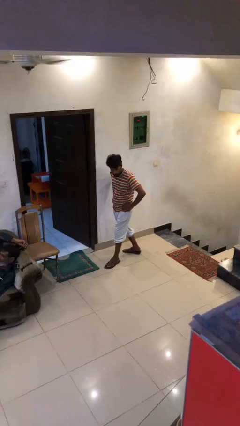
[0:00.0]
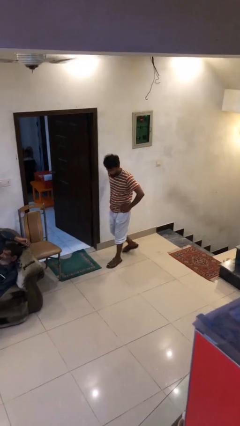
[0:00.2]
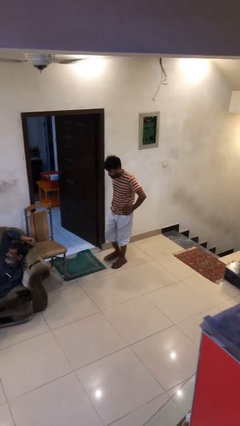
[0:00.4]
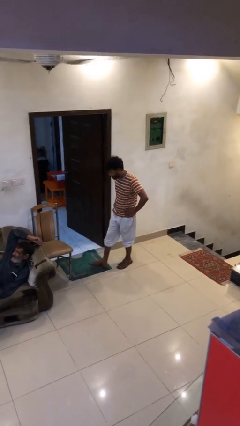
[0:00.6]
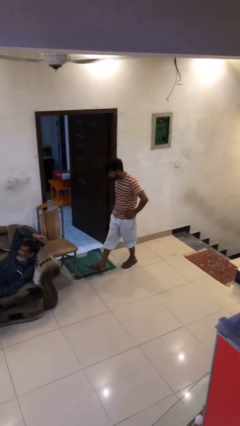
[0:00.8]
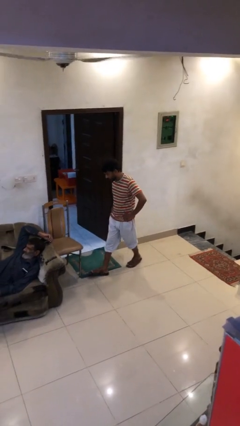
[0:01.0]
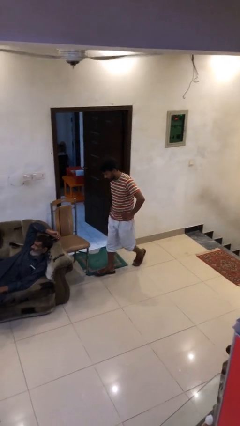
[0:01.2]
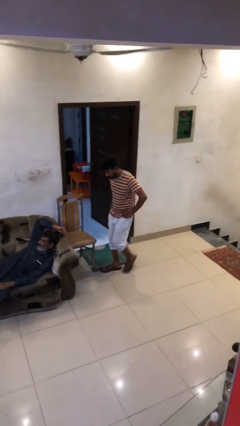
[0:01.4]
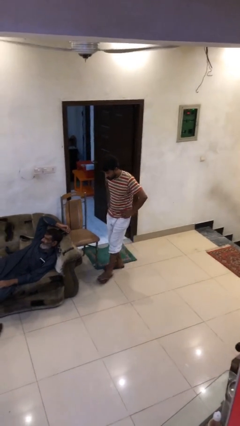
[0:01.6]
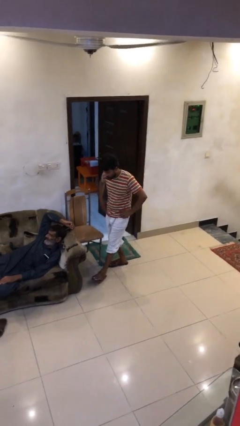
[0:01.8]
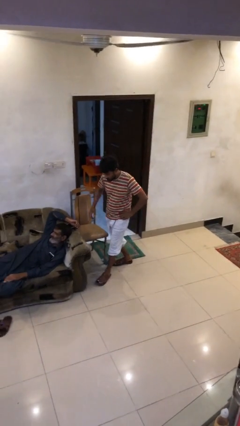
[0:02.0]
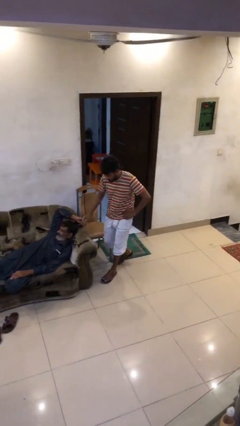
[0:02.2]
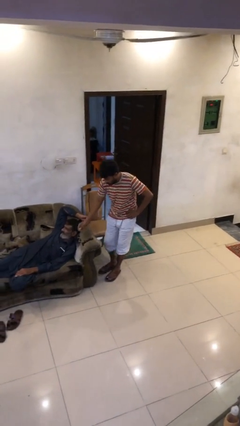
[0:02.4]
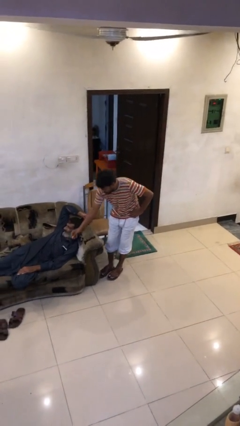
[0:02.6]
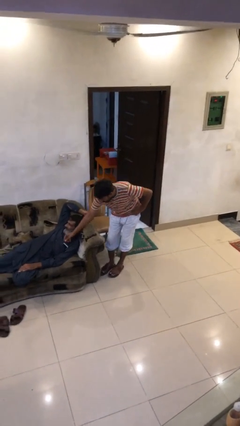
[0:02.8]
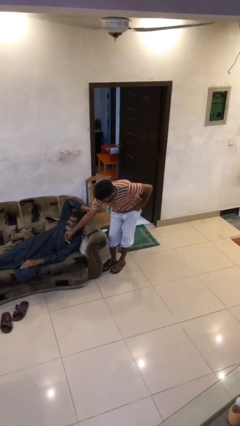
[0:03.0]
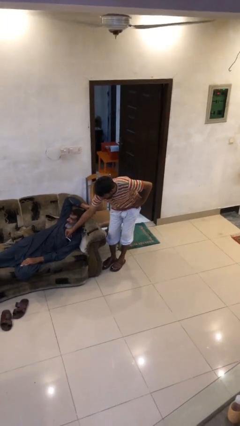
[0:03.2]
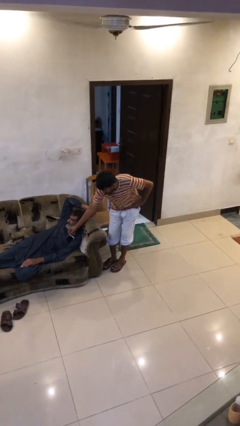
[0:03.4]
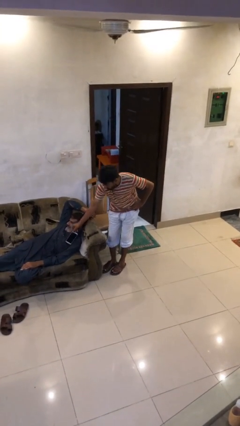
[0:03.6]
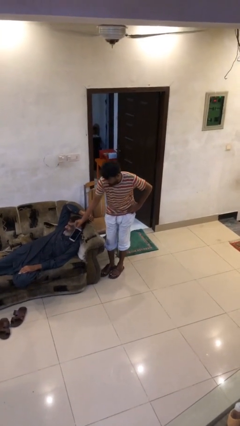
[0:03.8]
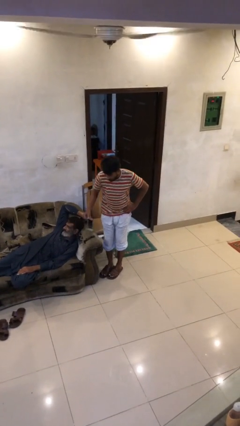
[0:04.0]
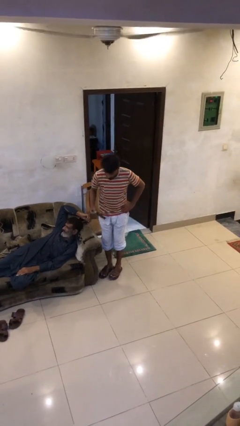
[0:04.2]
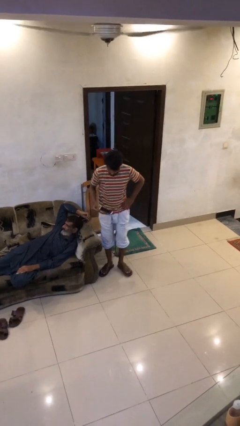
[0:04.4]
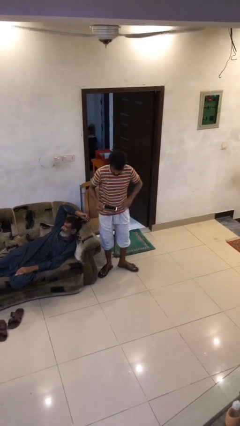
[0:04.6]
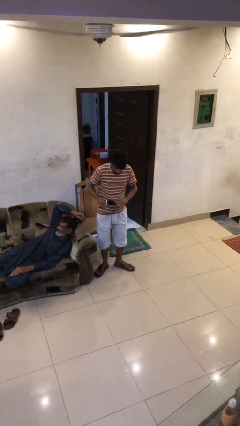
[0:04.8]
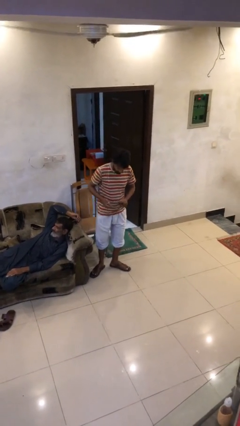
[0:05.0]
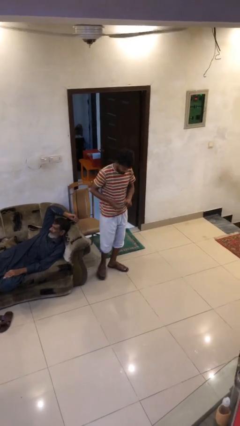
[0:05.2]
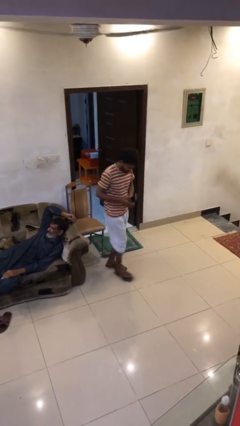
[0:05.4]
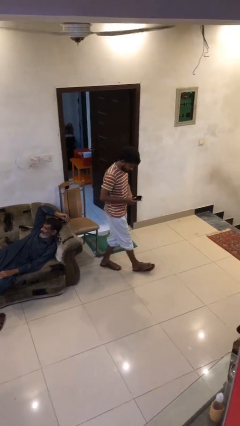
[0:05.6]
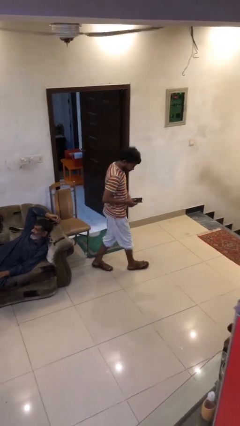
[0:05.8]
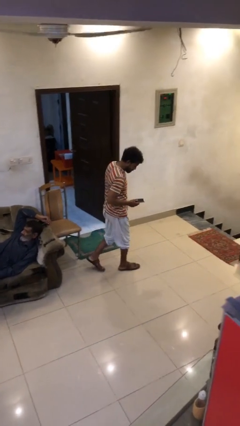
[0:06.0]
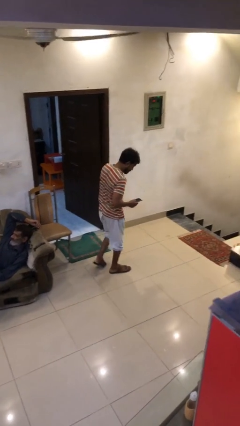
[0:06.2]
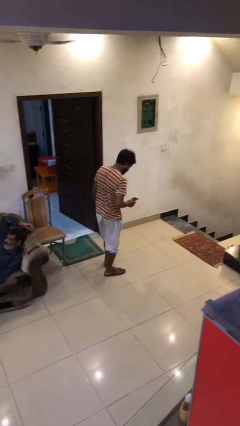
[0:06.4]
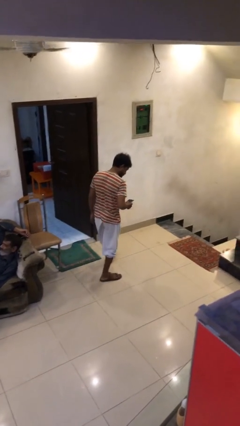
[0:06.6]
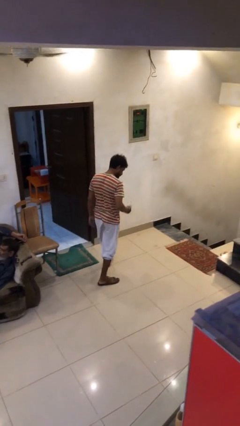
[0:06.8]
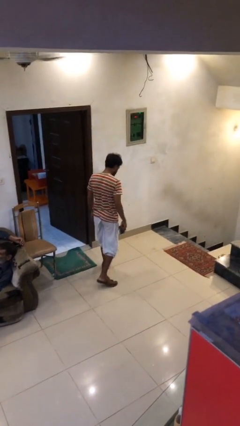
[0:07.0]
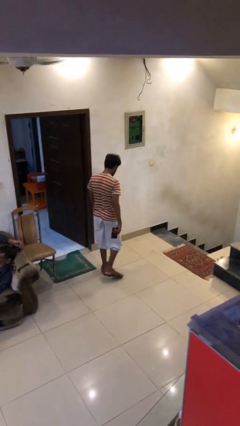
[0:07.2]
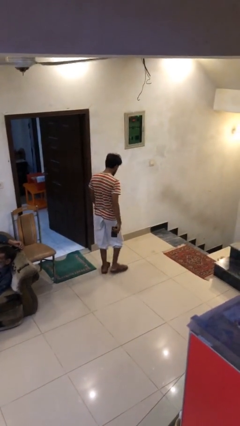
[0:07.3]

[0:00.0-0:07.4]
person steals object from person

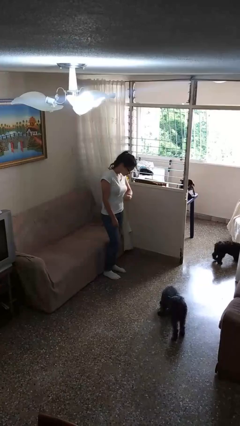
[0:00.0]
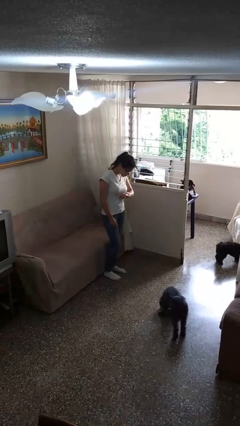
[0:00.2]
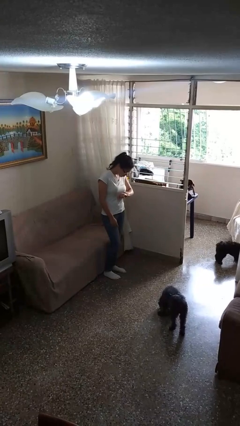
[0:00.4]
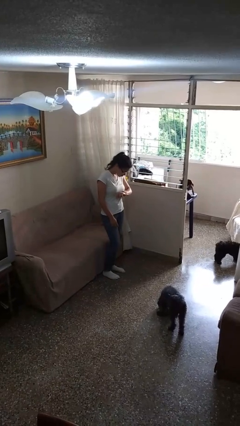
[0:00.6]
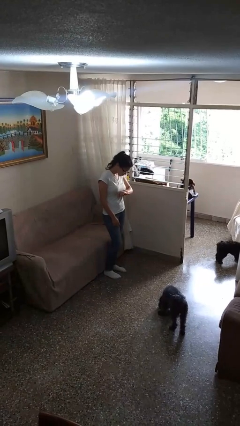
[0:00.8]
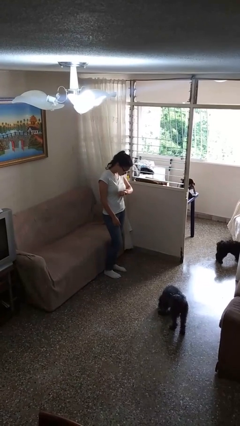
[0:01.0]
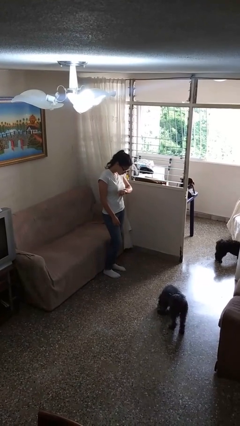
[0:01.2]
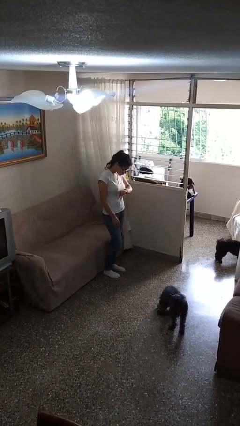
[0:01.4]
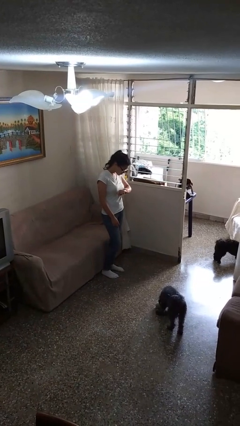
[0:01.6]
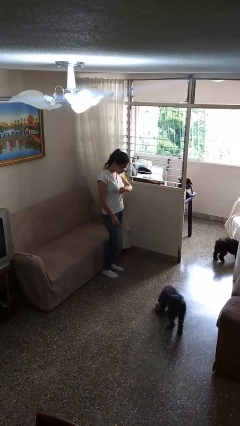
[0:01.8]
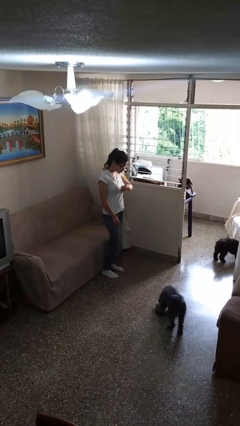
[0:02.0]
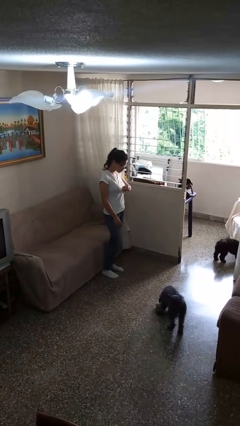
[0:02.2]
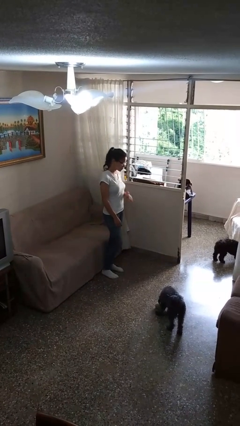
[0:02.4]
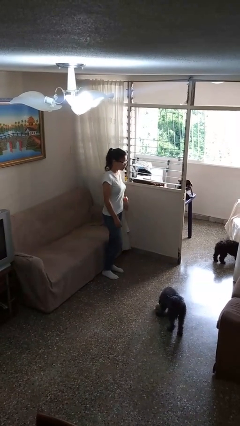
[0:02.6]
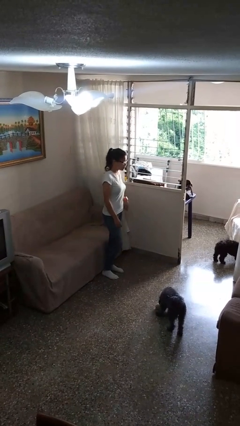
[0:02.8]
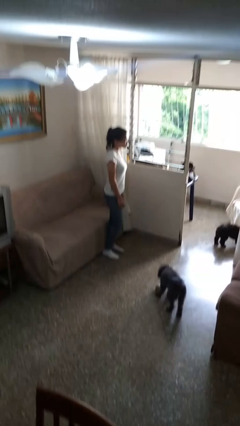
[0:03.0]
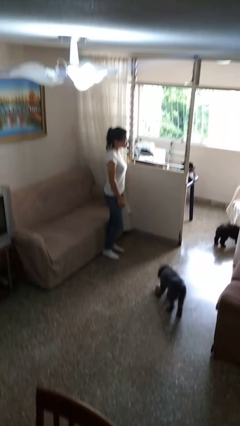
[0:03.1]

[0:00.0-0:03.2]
person looks at wristwatch

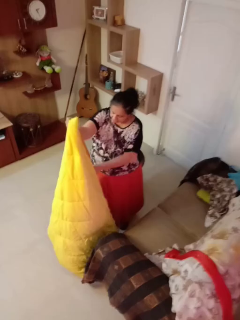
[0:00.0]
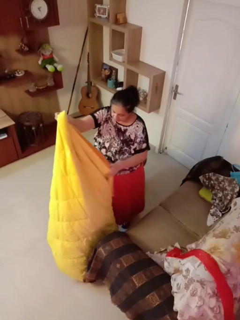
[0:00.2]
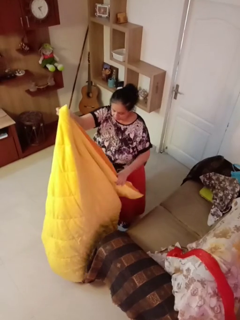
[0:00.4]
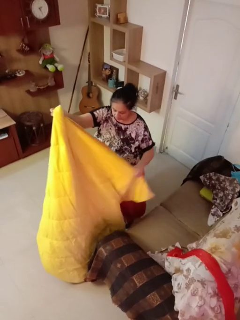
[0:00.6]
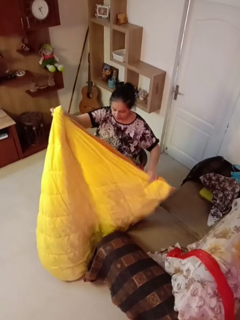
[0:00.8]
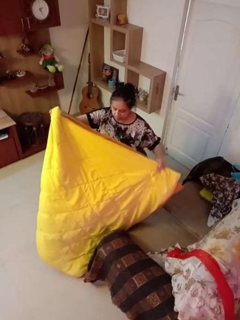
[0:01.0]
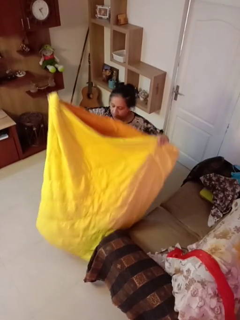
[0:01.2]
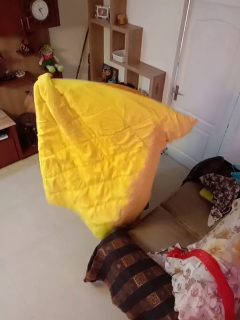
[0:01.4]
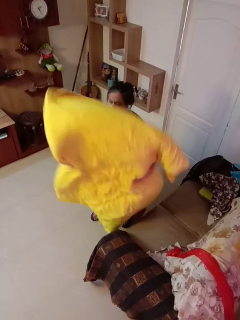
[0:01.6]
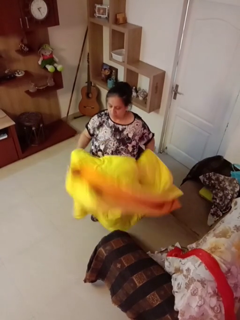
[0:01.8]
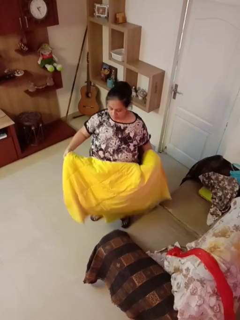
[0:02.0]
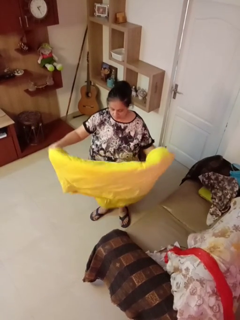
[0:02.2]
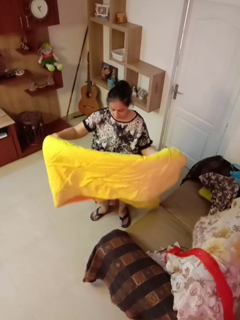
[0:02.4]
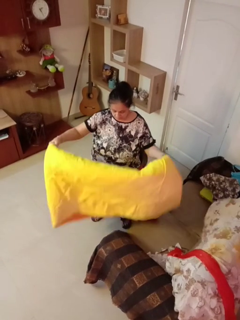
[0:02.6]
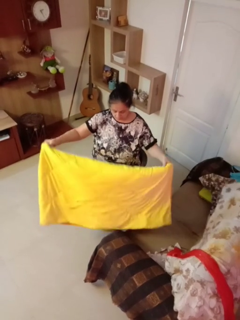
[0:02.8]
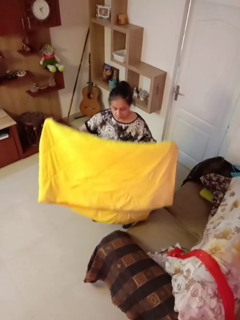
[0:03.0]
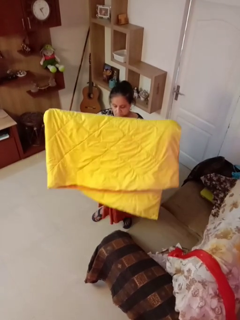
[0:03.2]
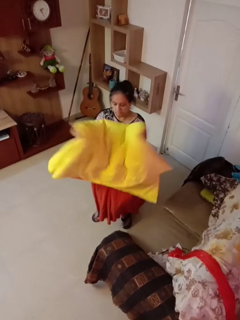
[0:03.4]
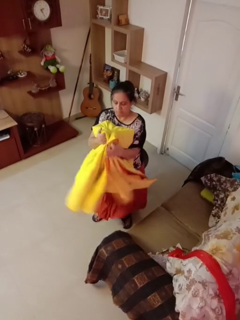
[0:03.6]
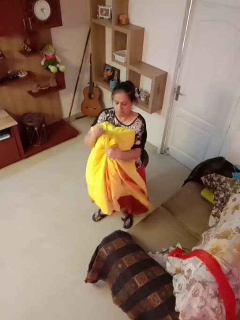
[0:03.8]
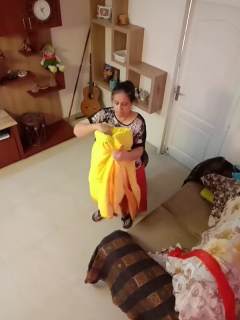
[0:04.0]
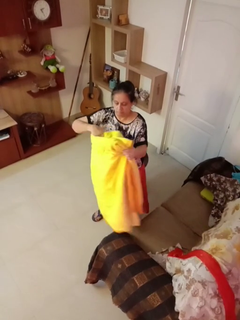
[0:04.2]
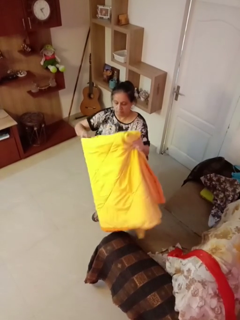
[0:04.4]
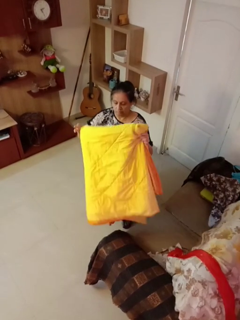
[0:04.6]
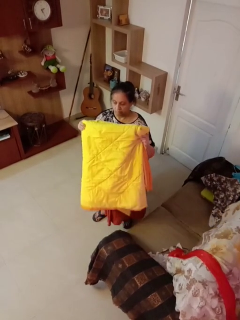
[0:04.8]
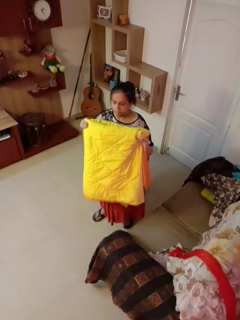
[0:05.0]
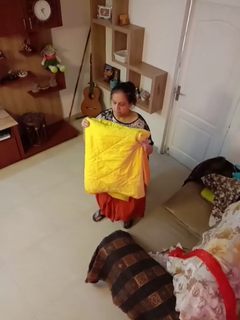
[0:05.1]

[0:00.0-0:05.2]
person folds blanket

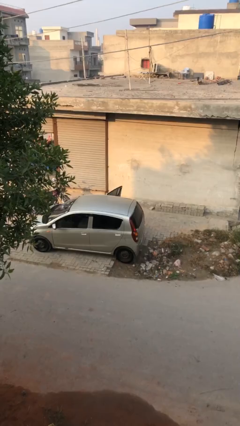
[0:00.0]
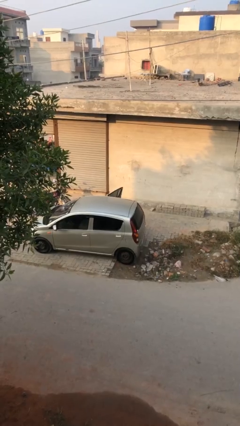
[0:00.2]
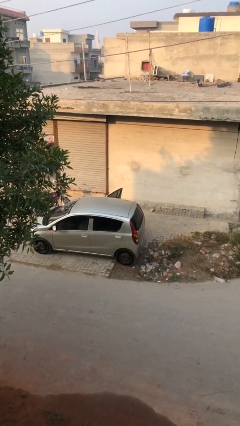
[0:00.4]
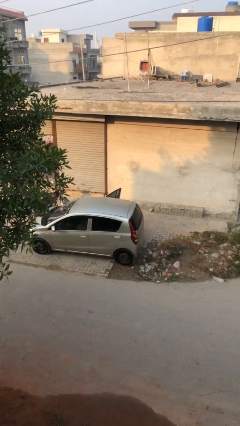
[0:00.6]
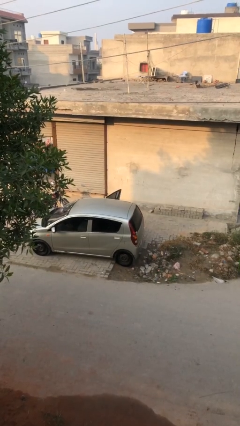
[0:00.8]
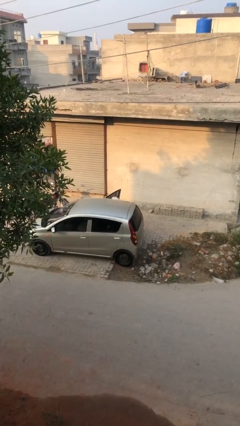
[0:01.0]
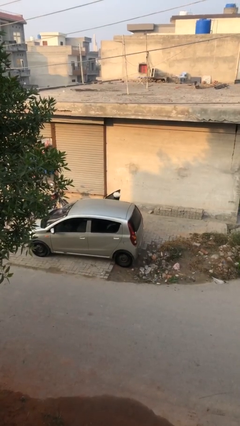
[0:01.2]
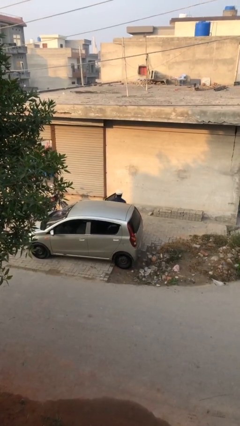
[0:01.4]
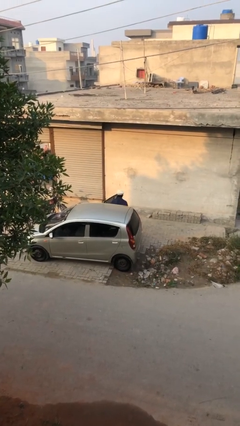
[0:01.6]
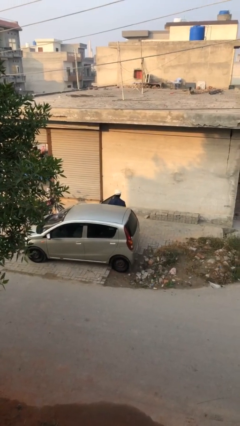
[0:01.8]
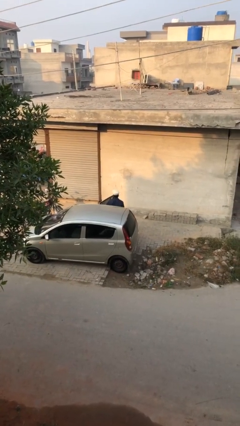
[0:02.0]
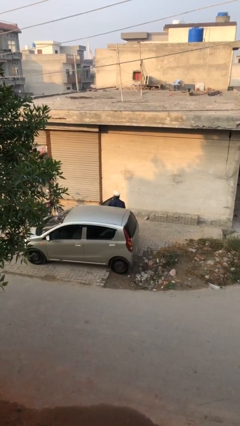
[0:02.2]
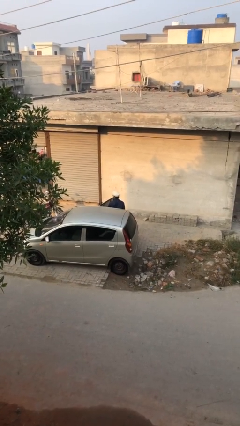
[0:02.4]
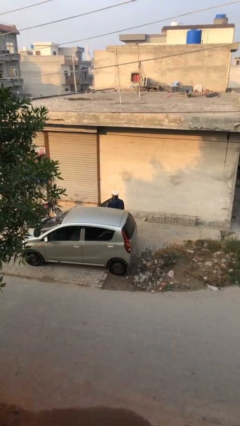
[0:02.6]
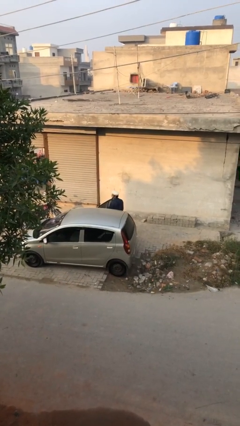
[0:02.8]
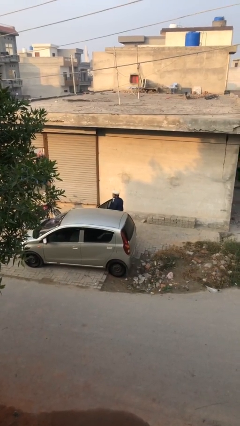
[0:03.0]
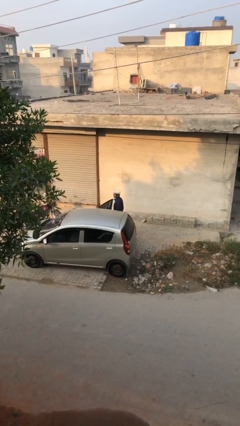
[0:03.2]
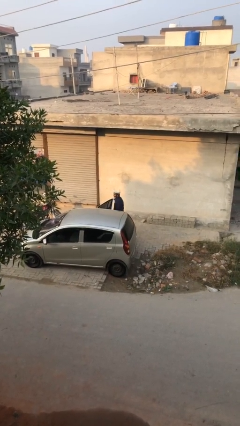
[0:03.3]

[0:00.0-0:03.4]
person exits car
